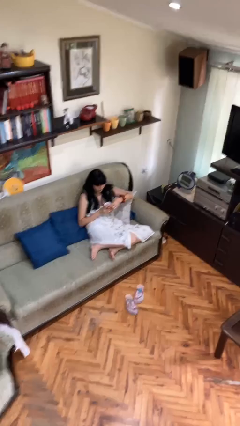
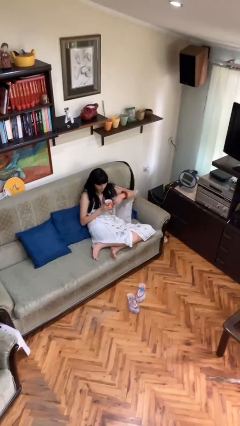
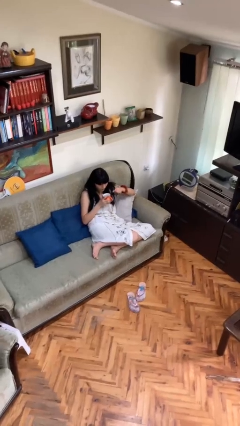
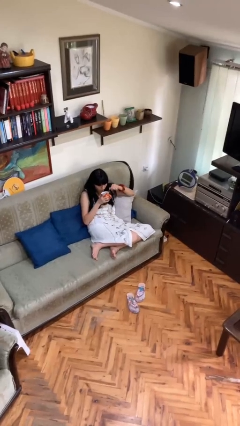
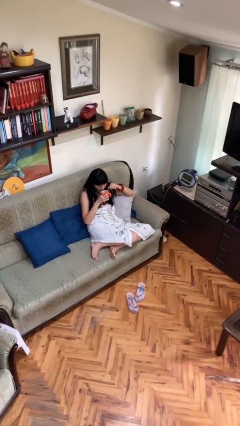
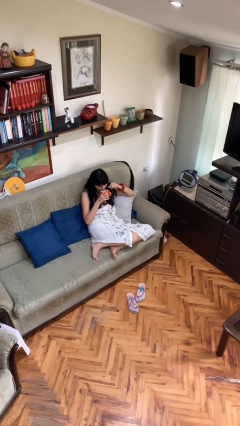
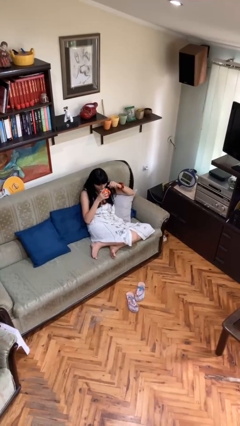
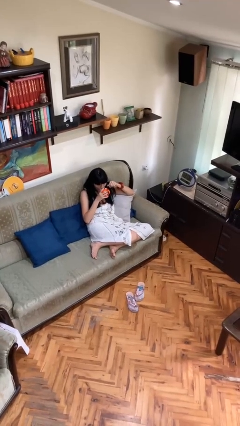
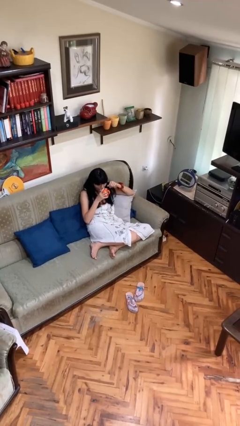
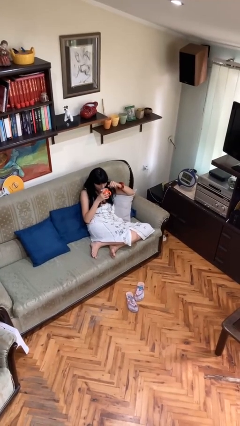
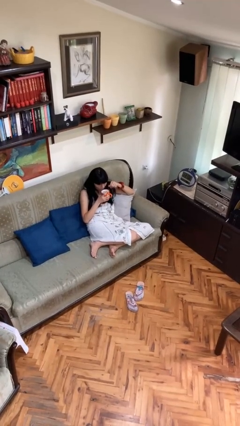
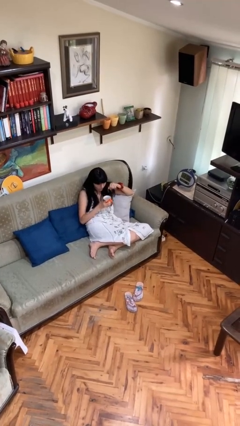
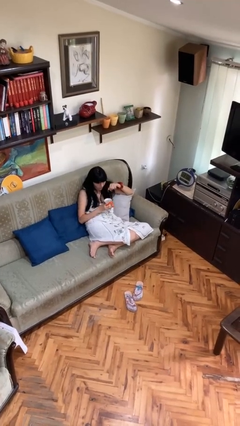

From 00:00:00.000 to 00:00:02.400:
person drinks from mug

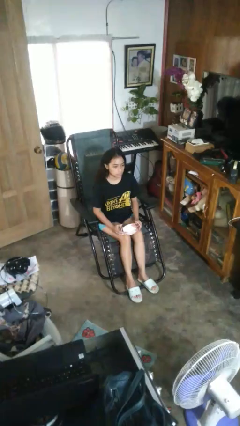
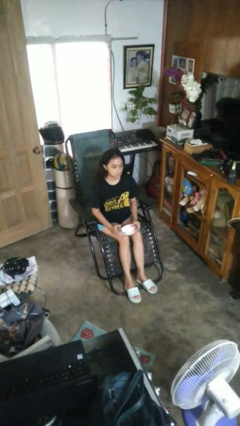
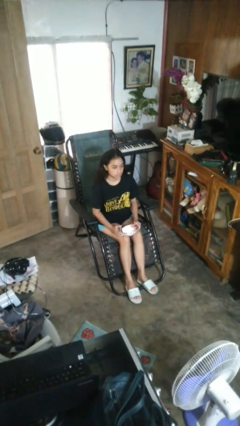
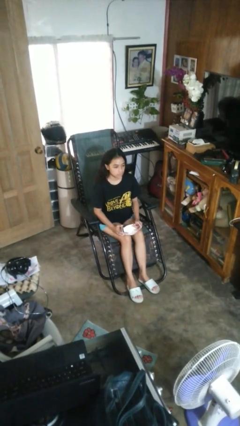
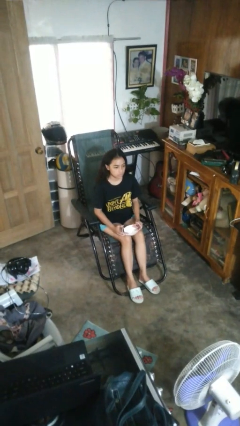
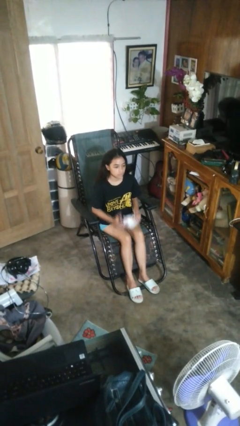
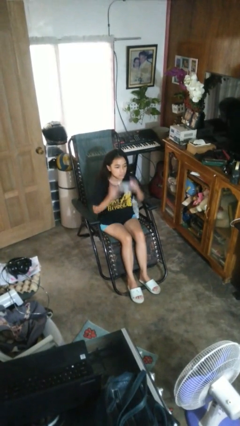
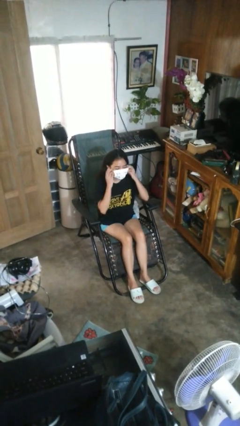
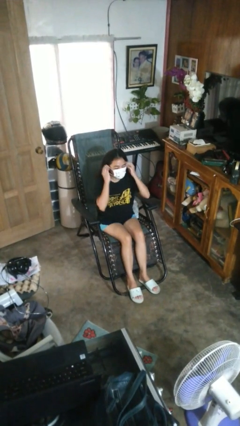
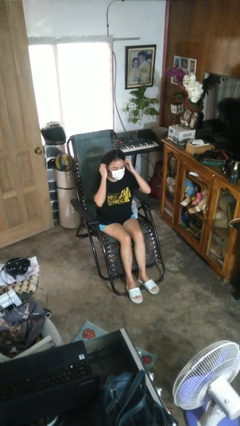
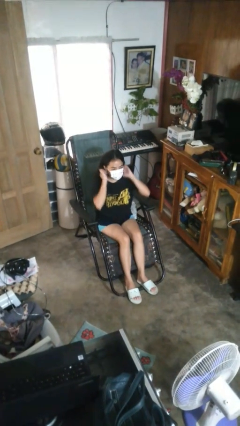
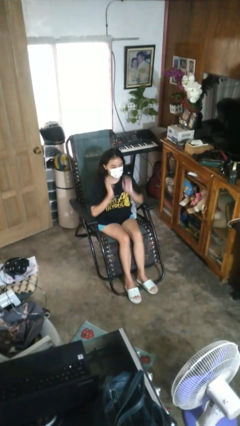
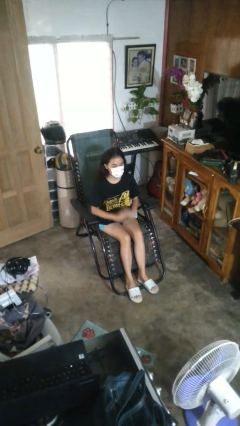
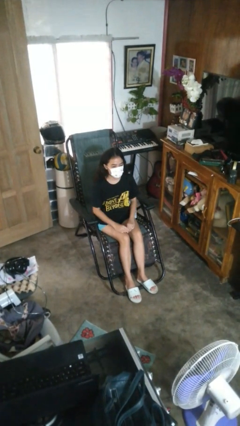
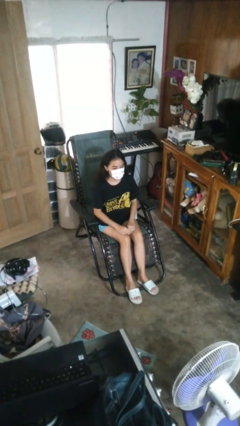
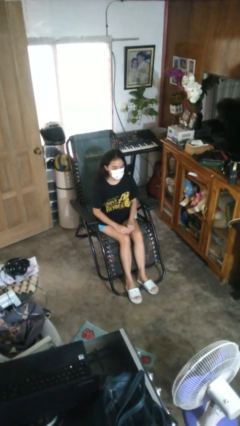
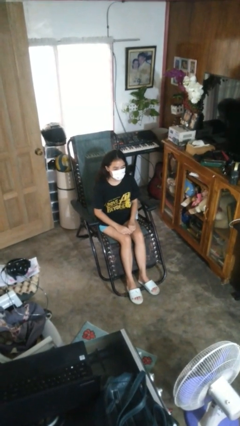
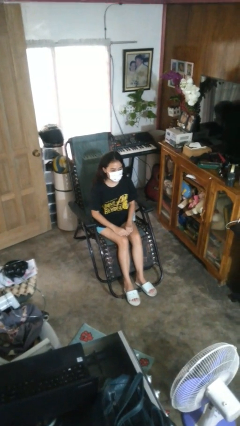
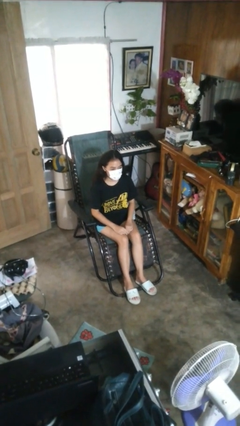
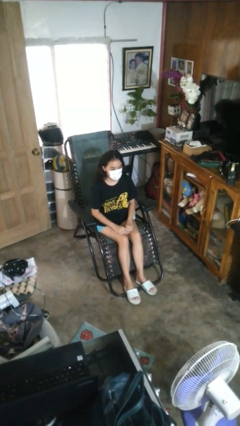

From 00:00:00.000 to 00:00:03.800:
person puts on facemask

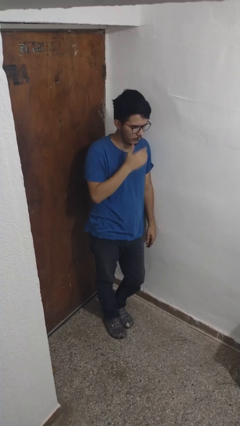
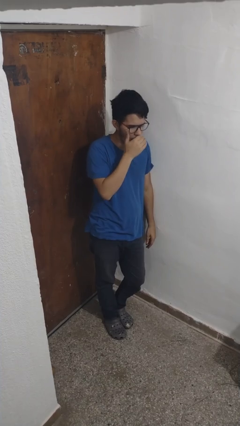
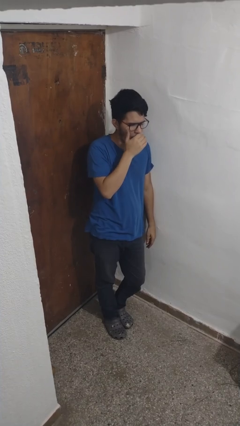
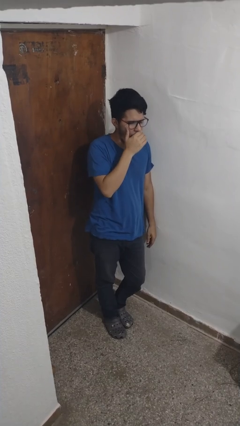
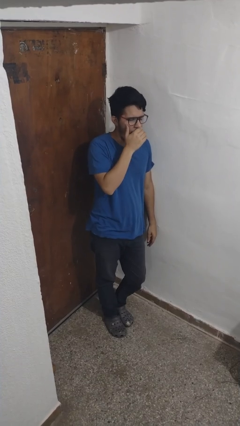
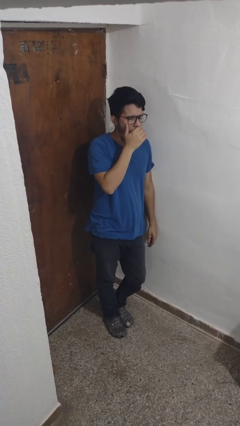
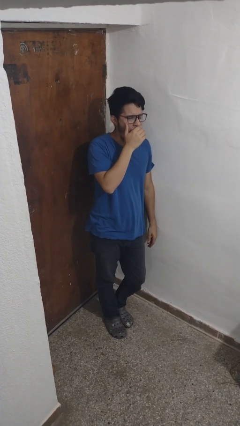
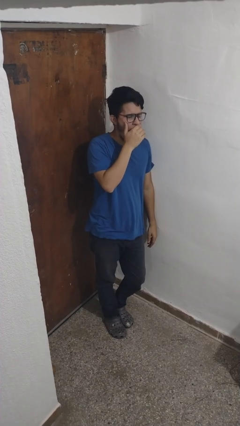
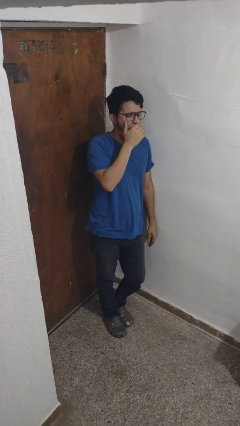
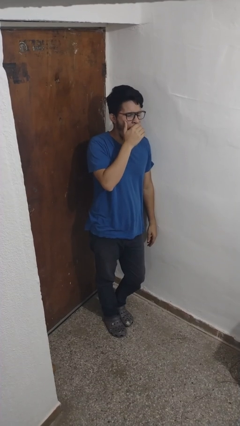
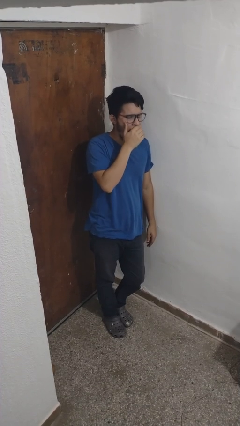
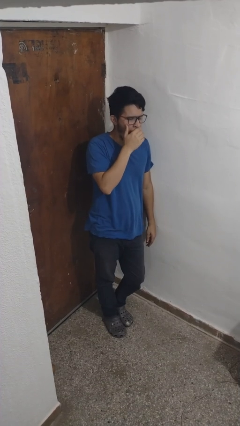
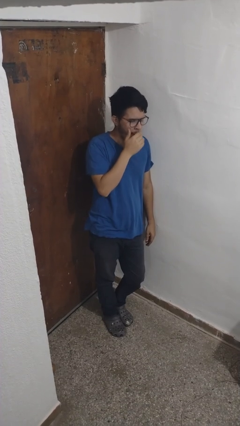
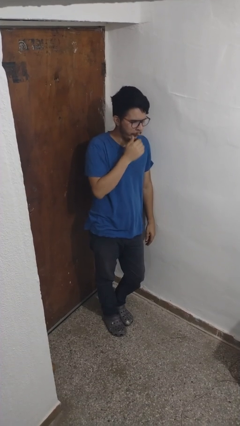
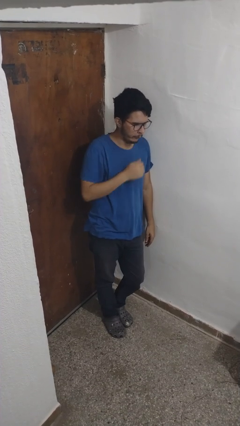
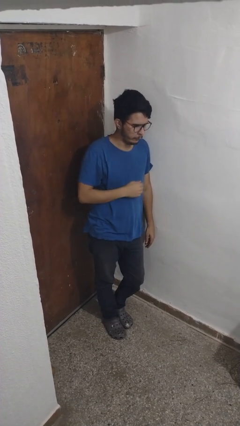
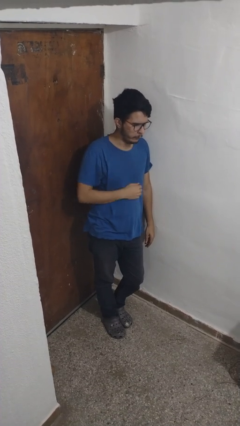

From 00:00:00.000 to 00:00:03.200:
person yawns

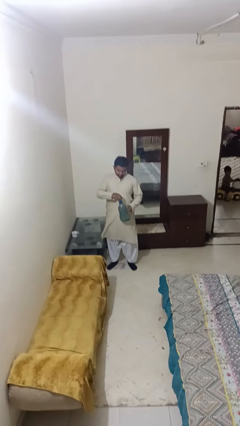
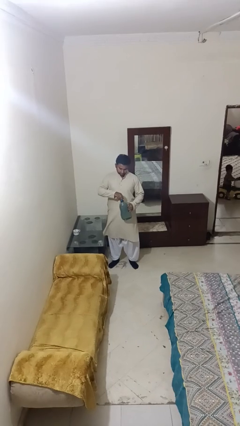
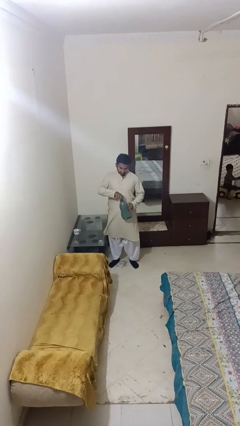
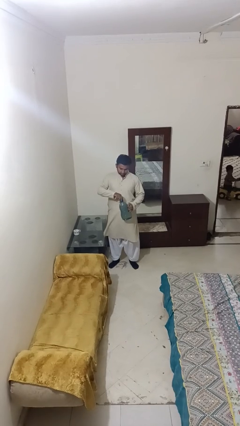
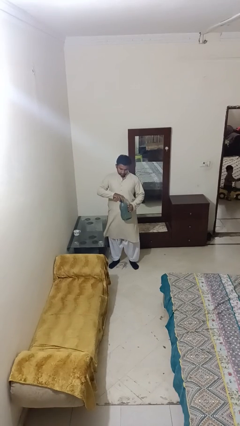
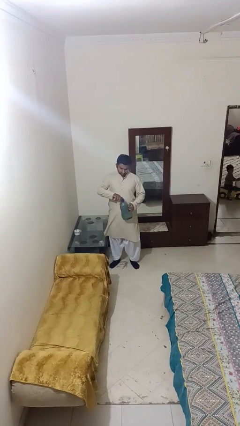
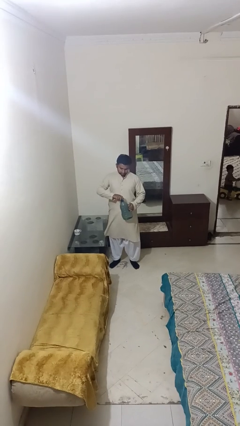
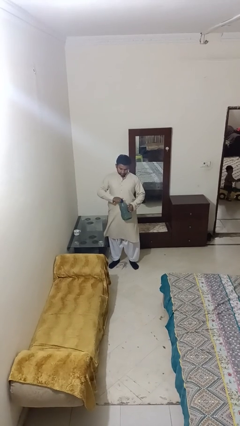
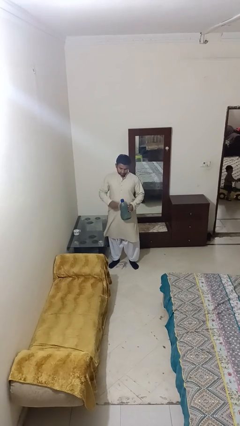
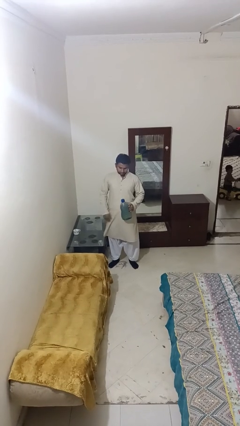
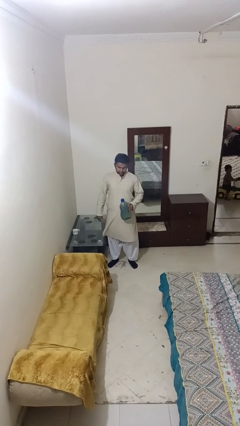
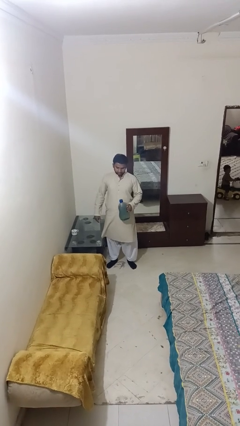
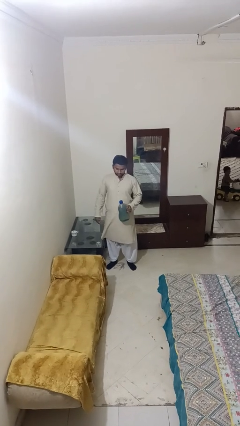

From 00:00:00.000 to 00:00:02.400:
person screws lid to bottle

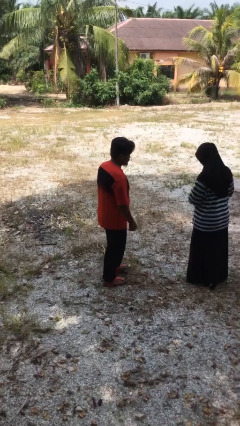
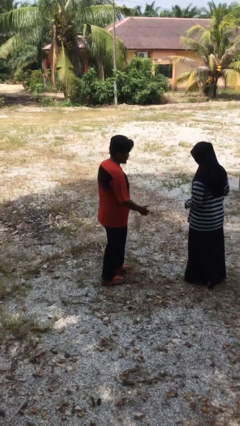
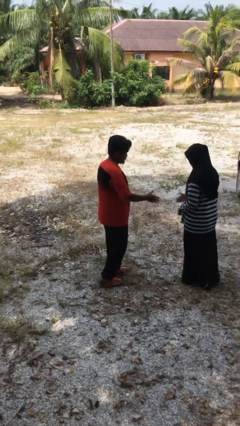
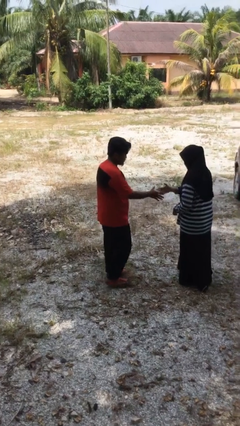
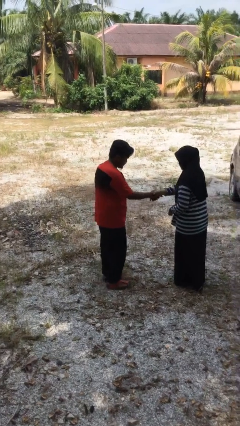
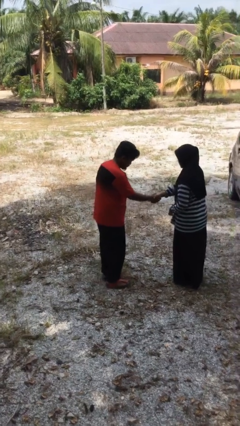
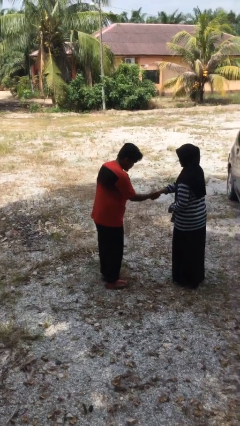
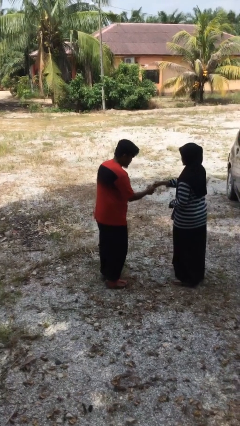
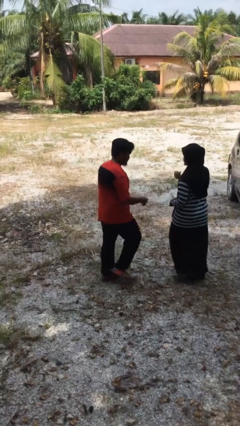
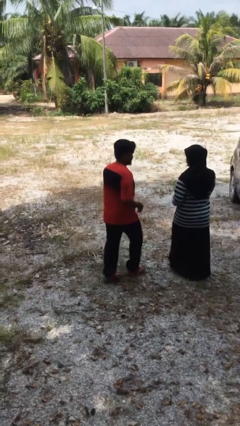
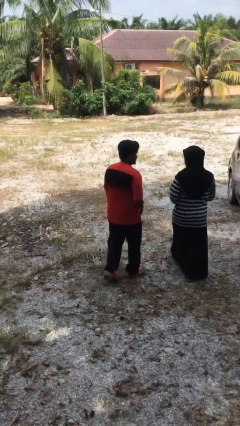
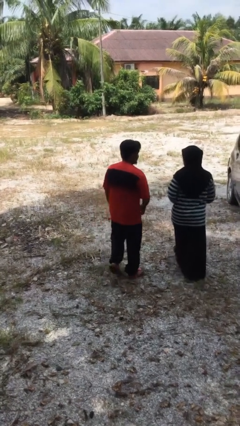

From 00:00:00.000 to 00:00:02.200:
person shakes hand

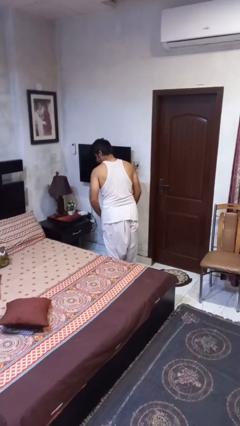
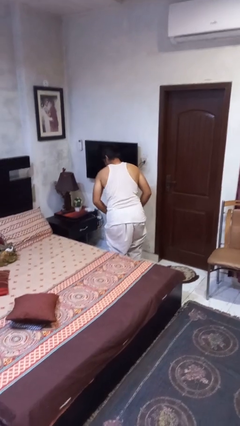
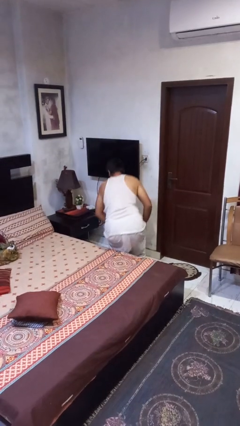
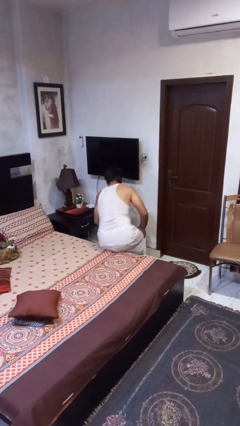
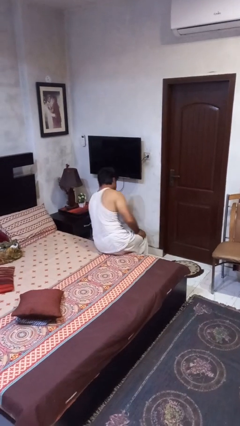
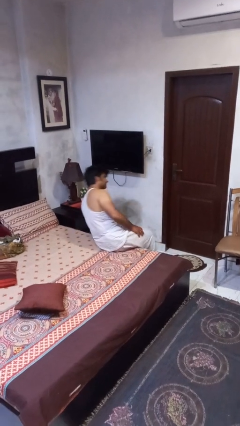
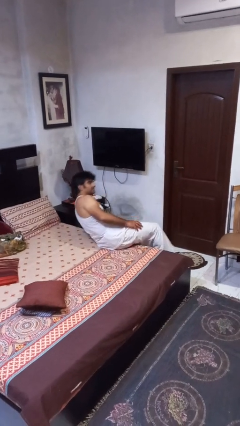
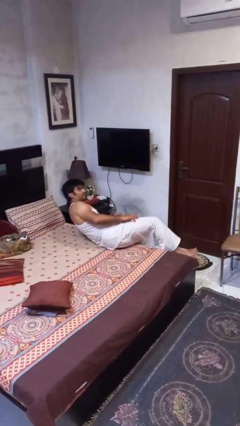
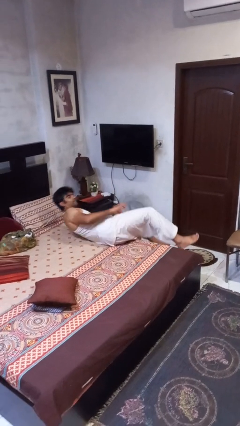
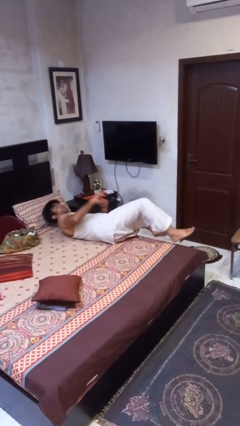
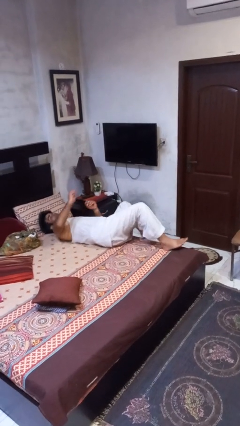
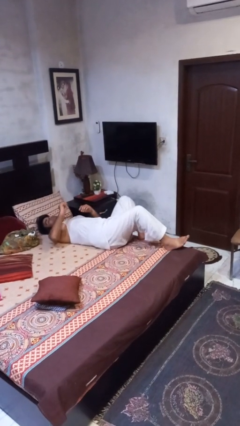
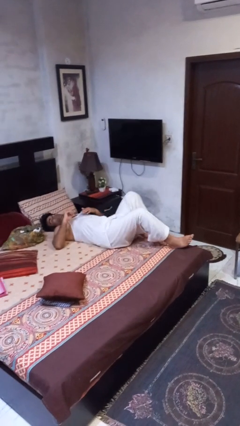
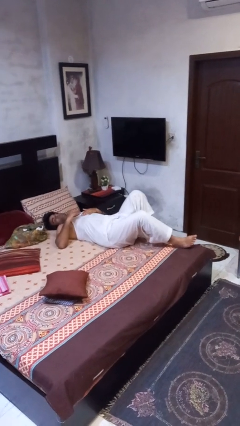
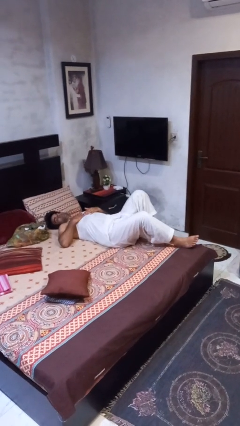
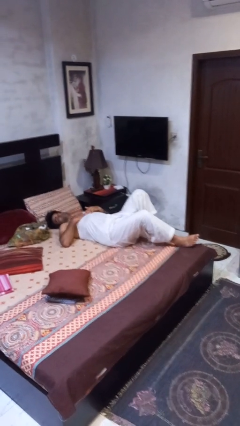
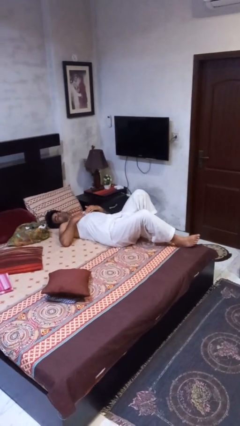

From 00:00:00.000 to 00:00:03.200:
person lies down on bed
